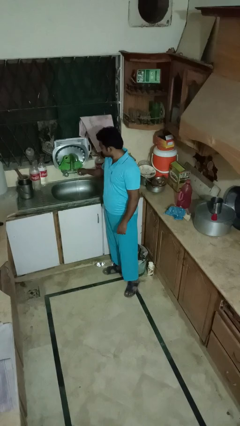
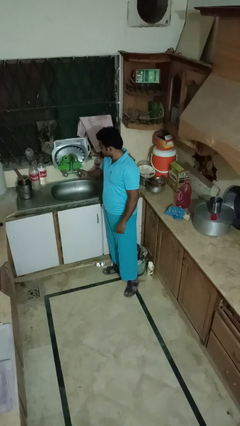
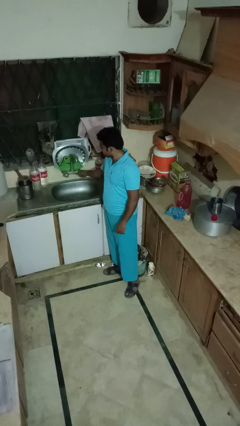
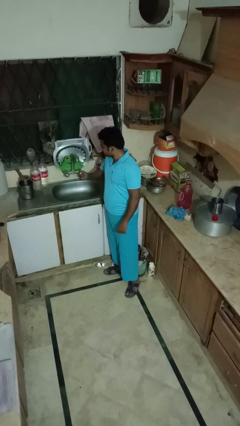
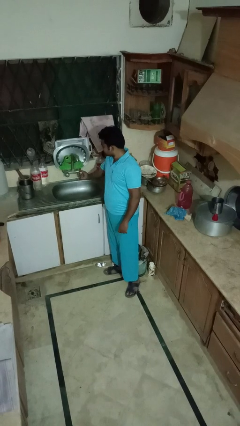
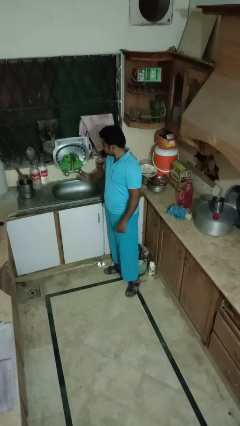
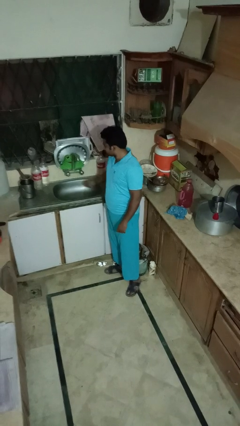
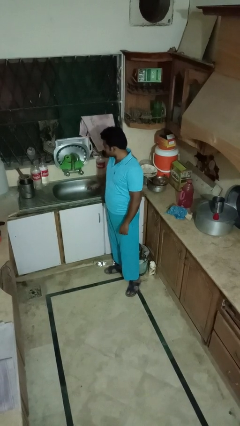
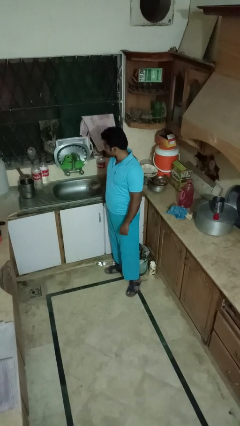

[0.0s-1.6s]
person turns off faucet

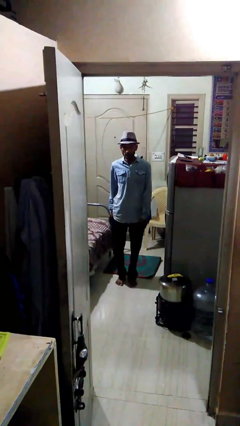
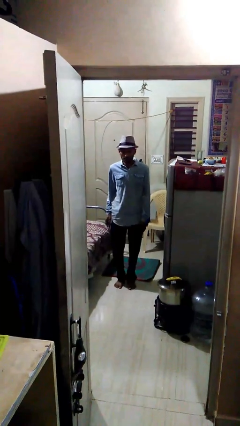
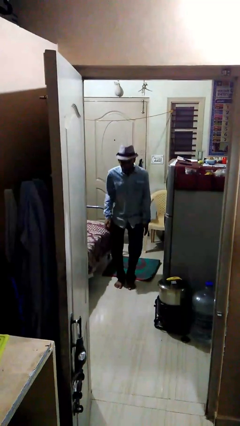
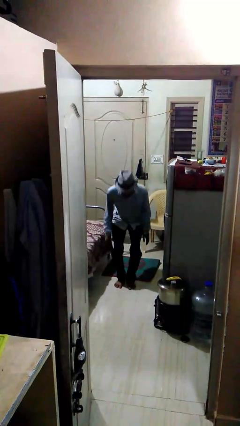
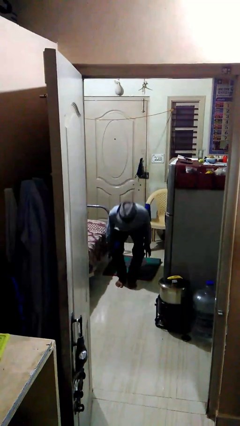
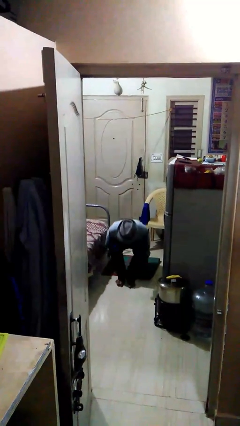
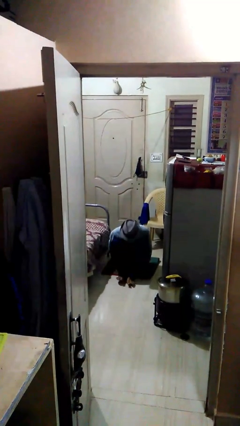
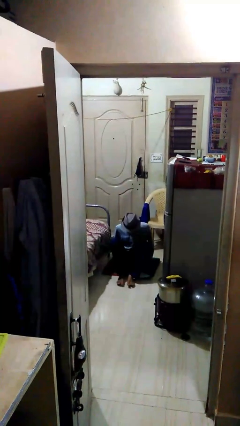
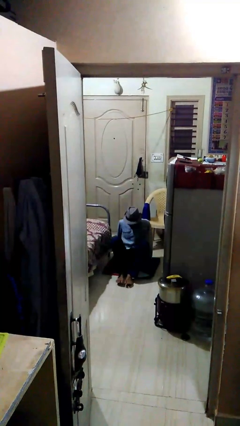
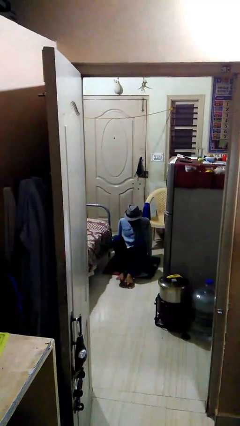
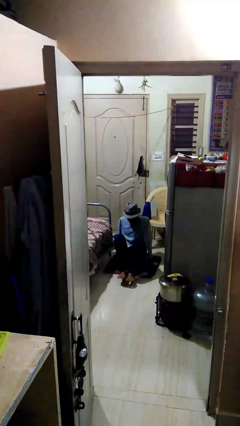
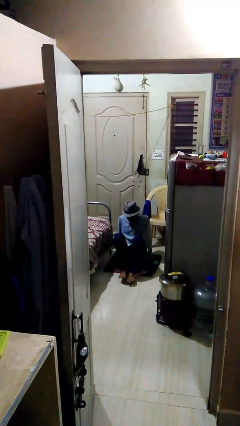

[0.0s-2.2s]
person sits down

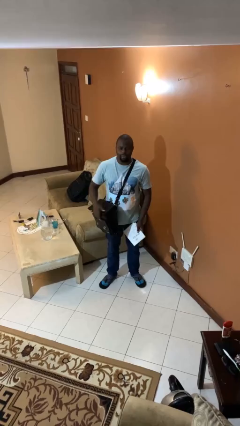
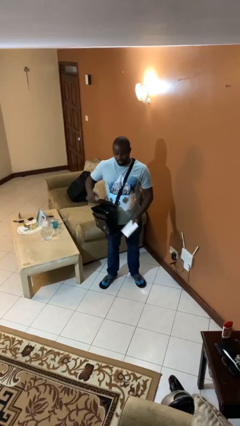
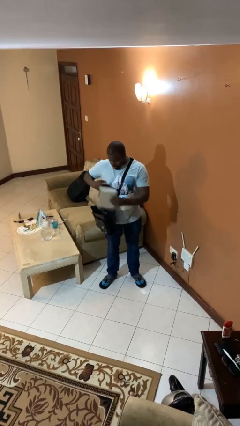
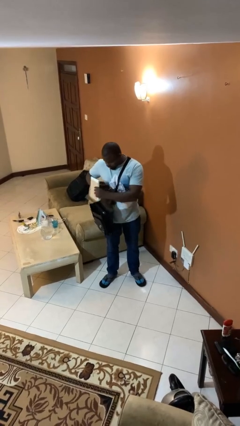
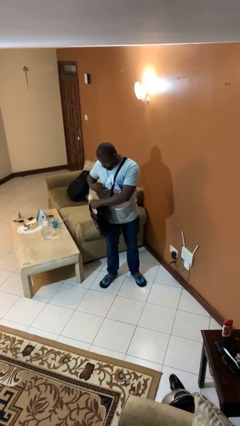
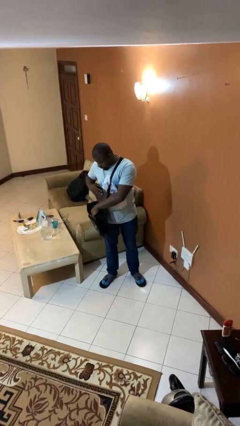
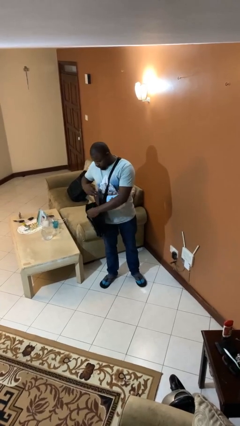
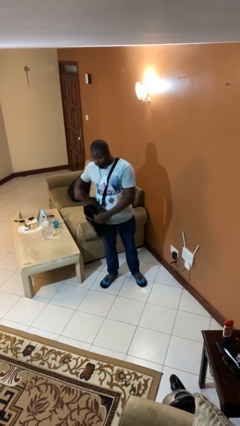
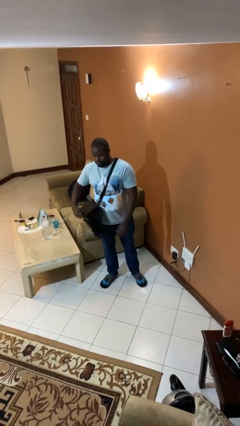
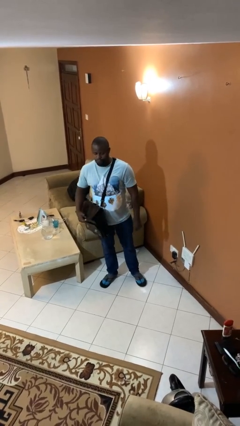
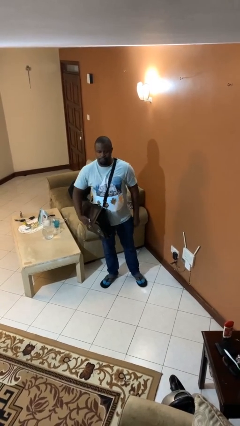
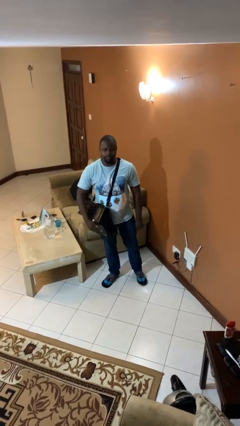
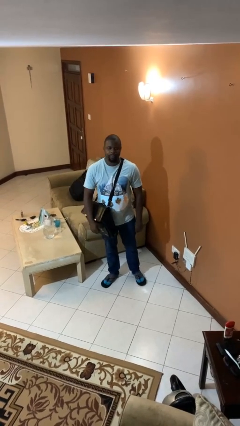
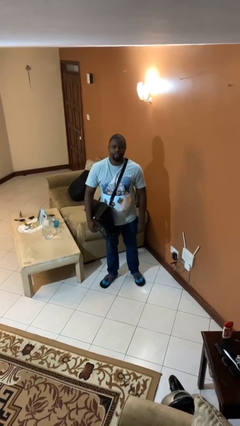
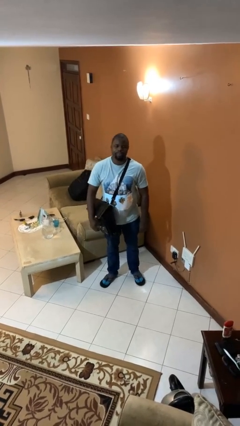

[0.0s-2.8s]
person puts object into purse

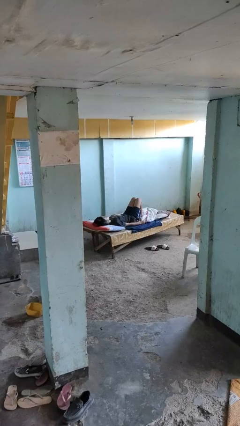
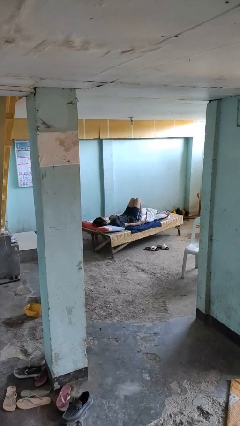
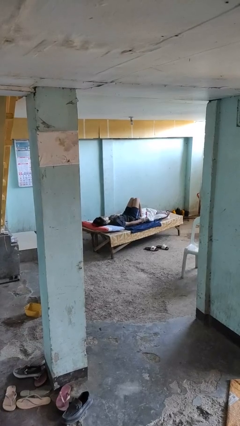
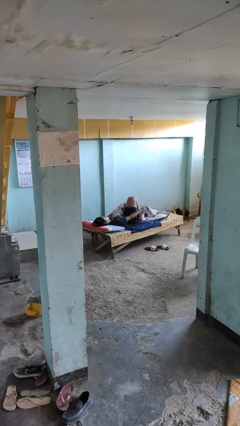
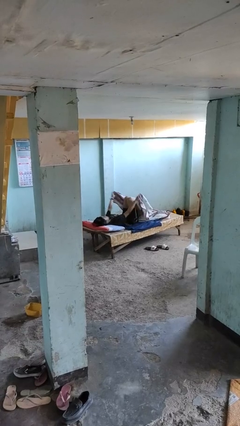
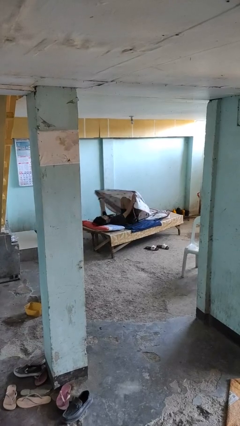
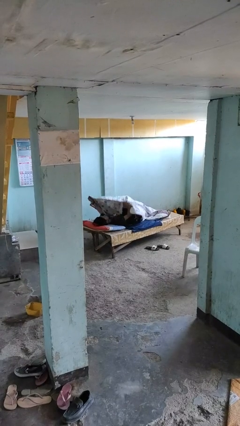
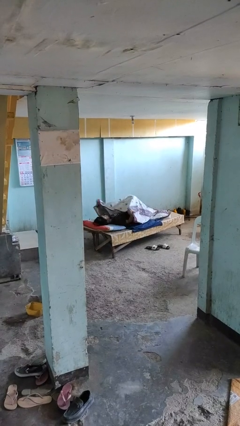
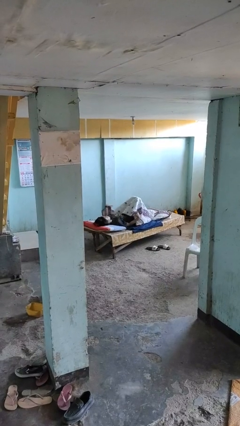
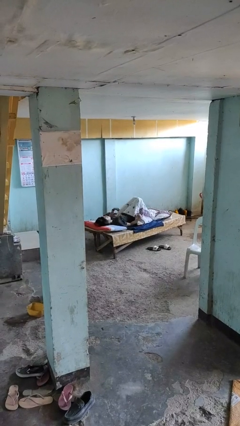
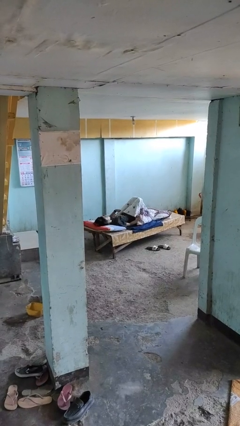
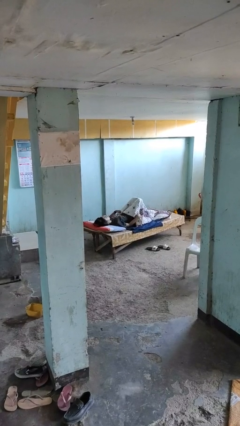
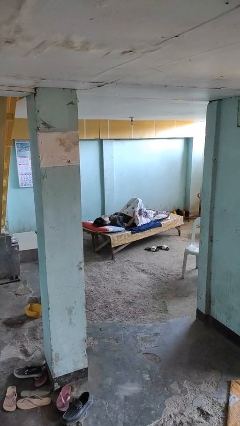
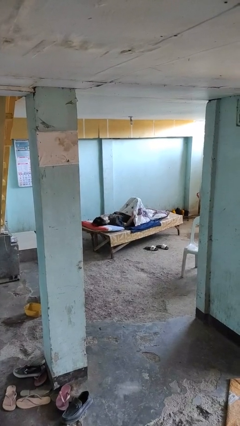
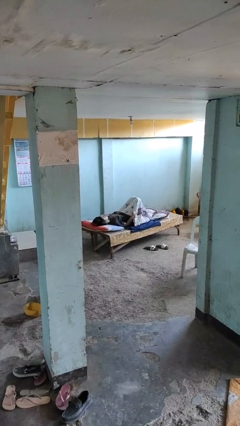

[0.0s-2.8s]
person covers with bedsheets

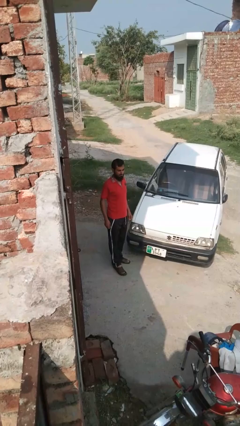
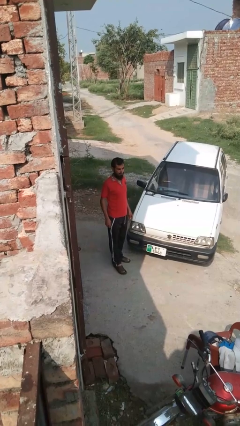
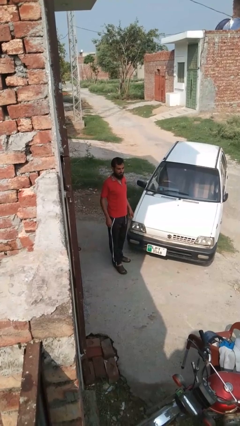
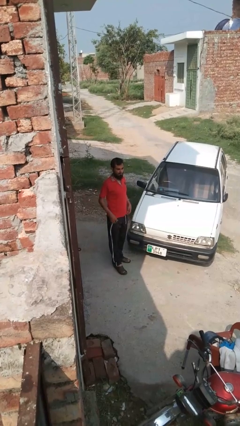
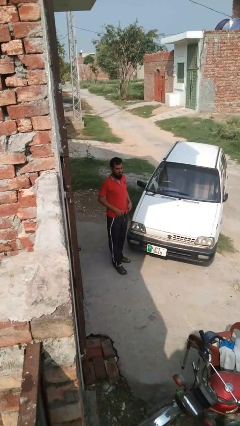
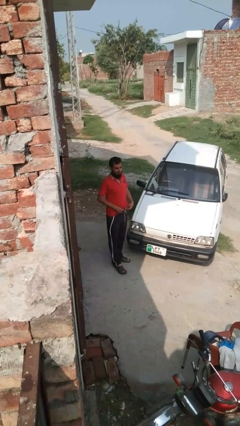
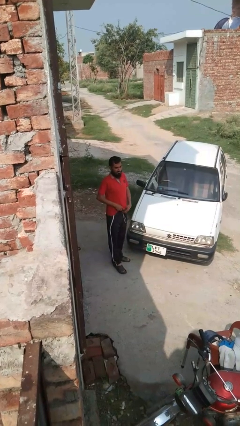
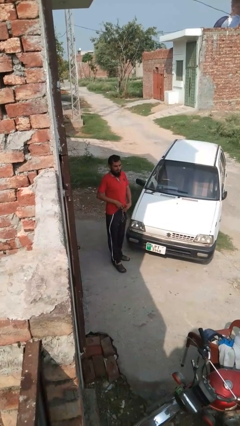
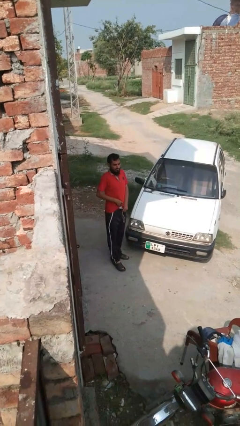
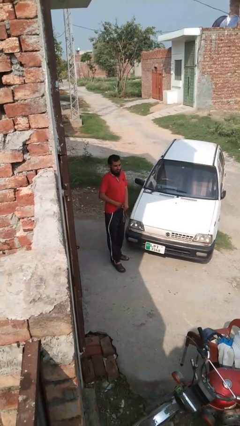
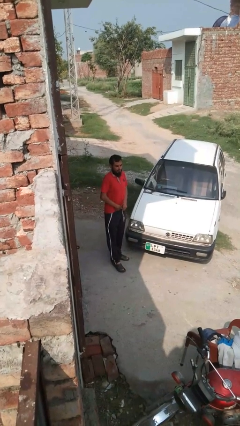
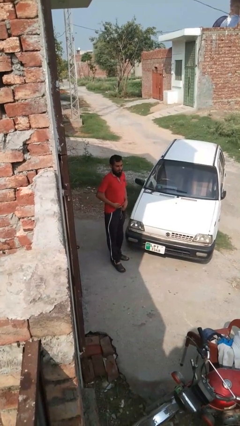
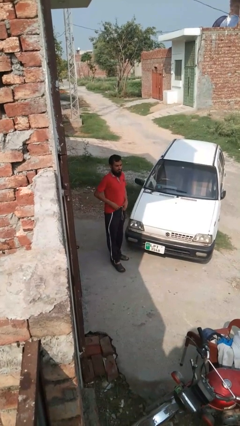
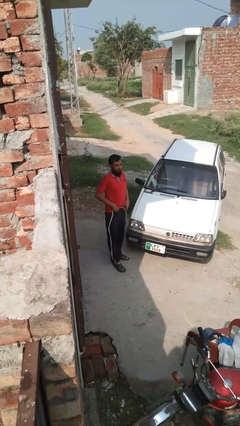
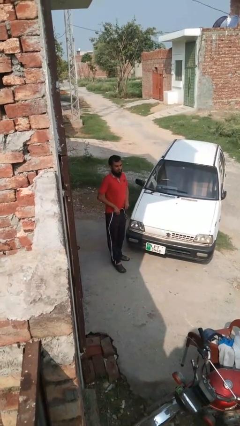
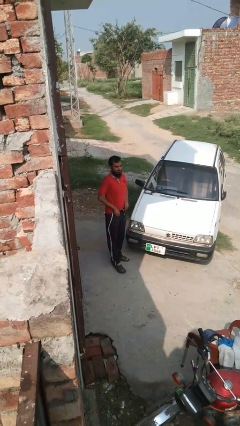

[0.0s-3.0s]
person tucks in shirt

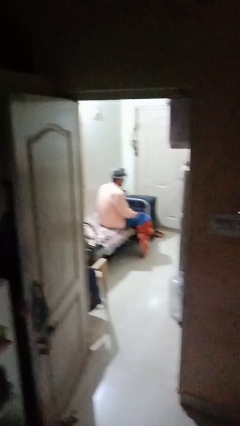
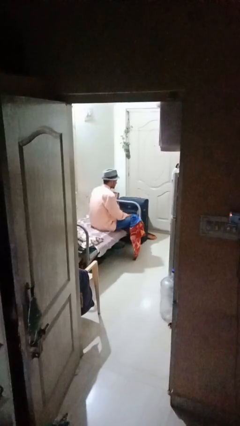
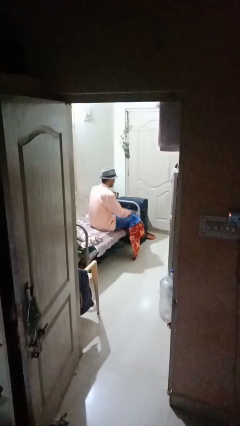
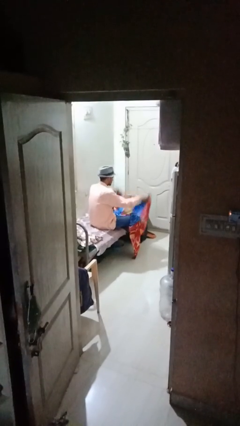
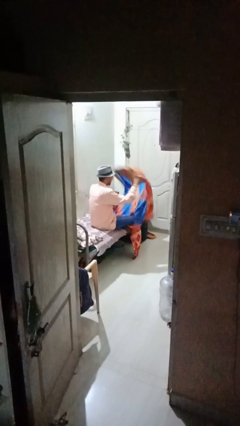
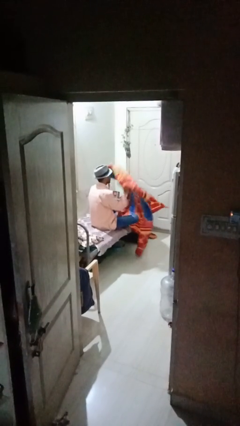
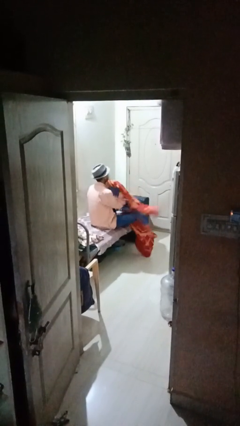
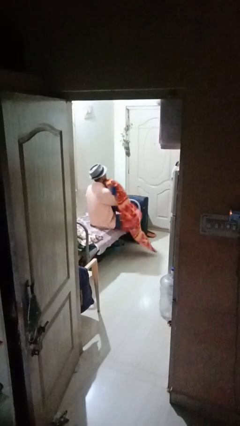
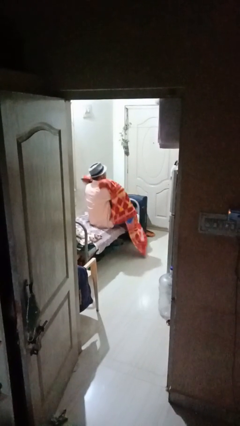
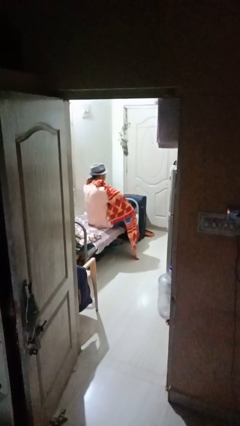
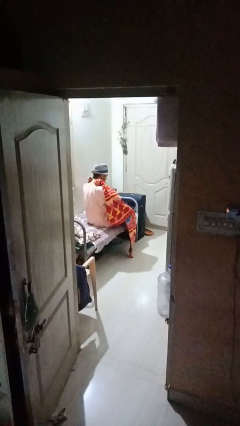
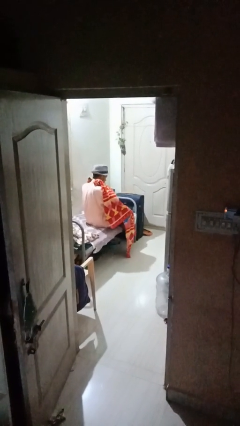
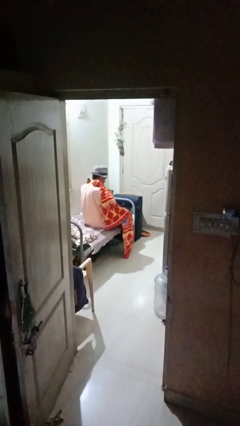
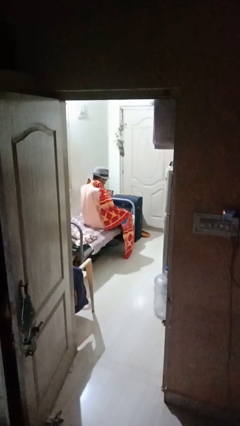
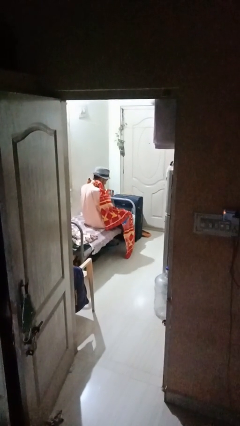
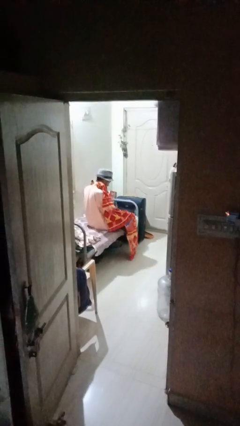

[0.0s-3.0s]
person covers with blanket

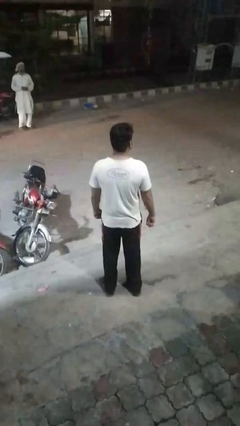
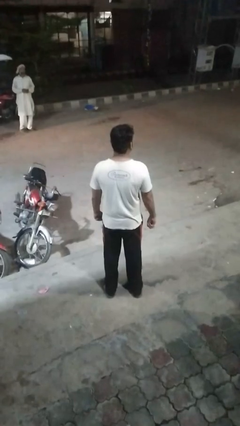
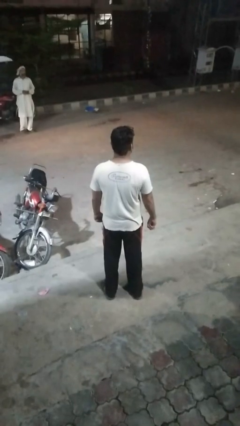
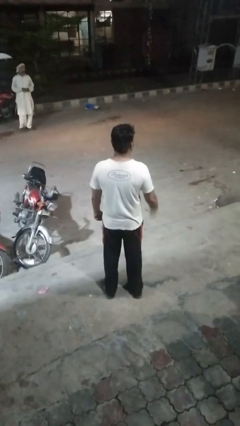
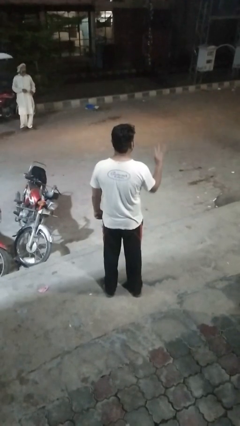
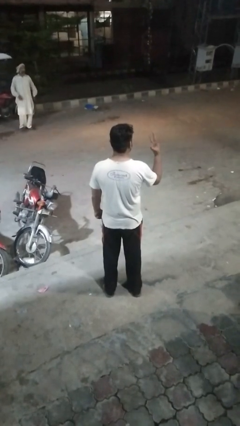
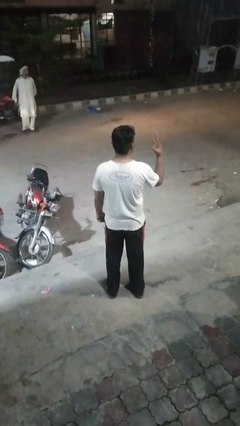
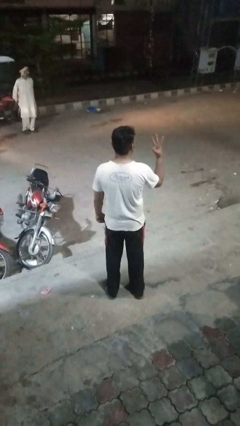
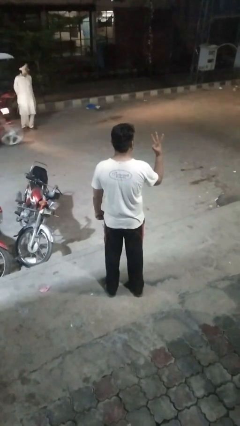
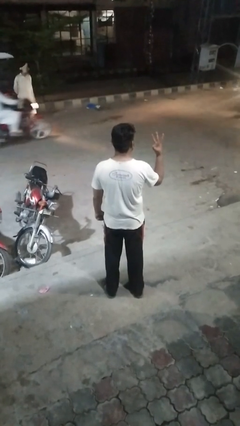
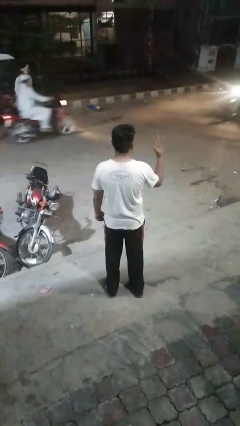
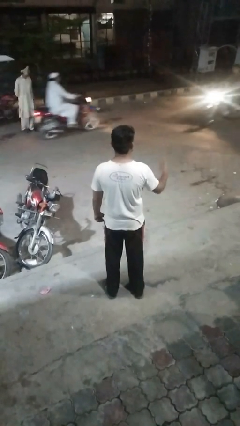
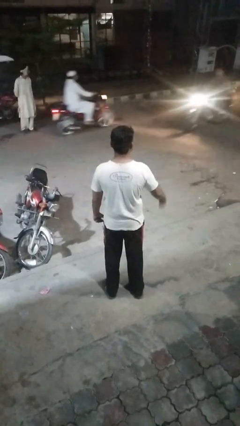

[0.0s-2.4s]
person gestures number three
